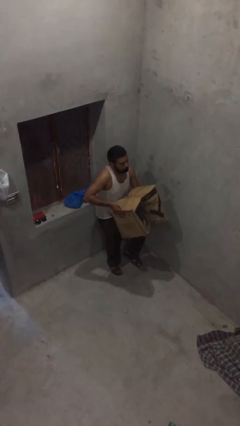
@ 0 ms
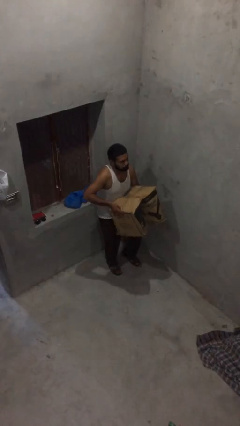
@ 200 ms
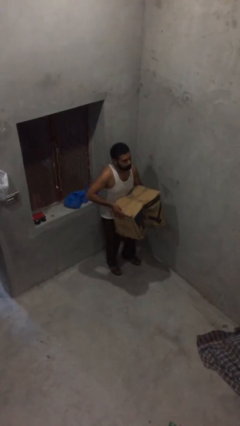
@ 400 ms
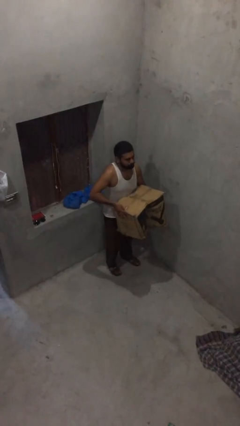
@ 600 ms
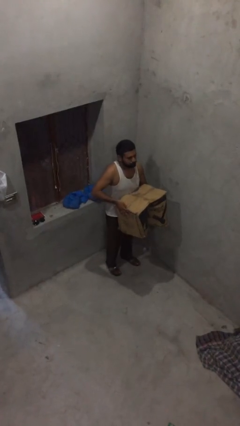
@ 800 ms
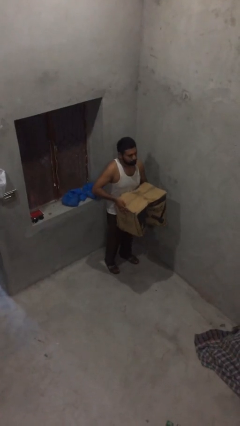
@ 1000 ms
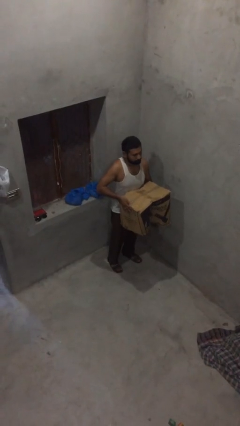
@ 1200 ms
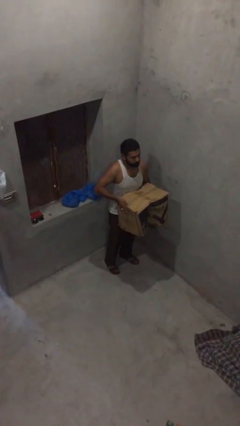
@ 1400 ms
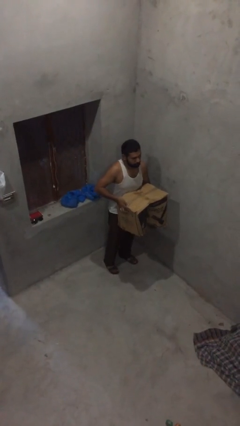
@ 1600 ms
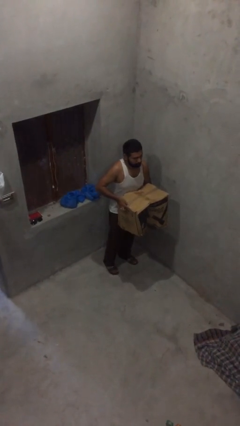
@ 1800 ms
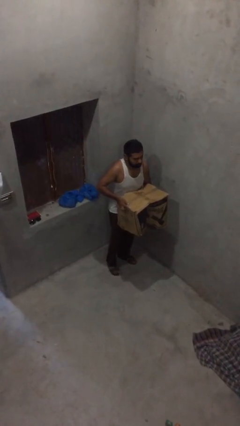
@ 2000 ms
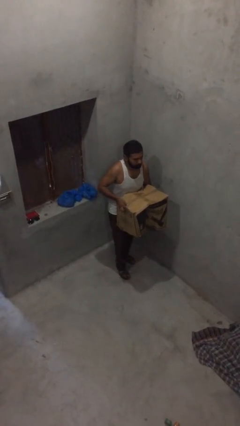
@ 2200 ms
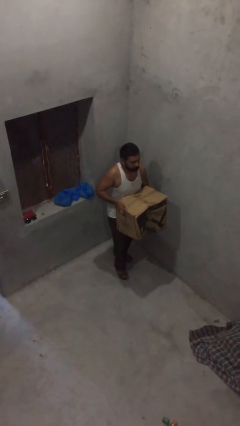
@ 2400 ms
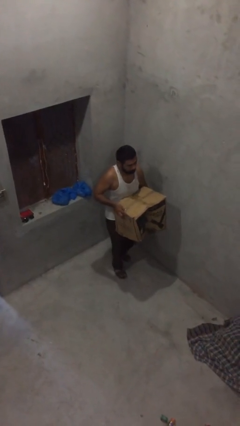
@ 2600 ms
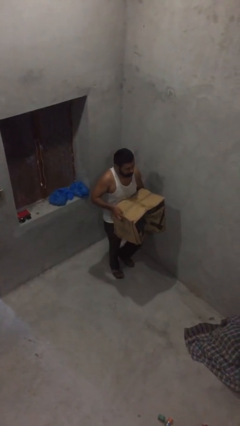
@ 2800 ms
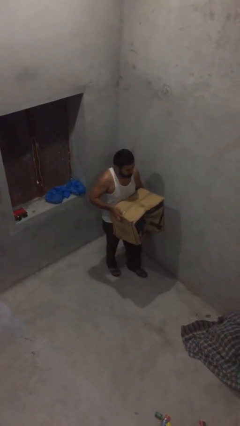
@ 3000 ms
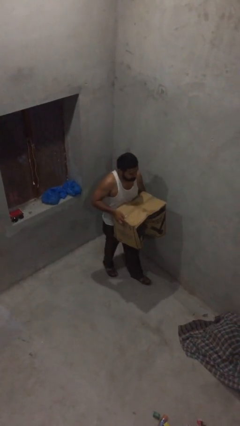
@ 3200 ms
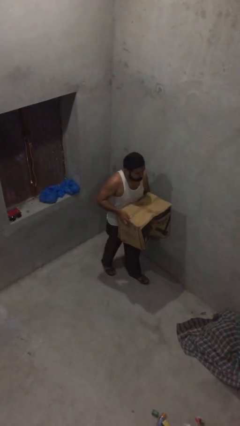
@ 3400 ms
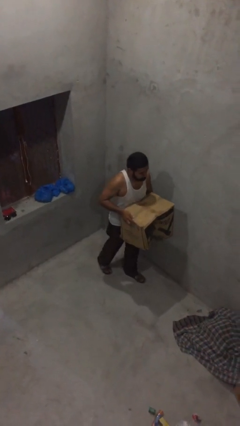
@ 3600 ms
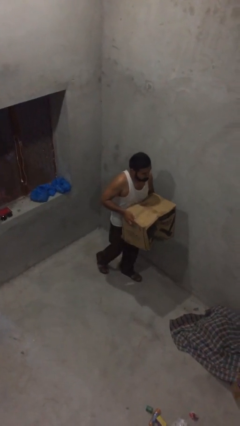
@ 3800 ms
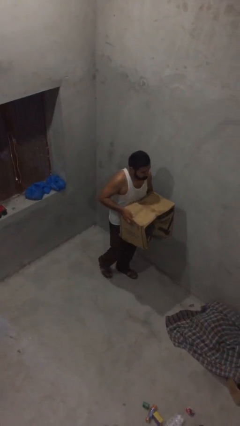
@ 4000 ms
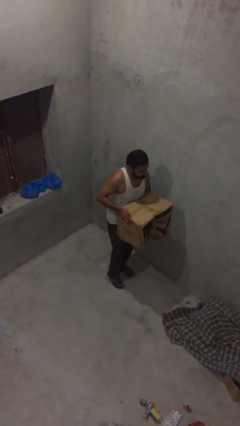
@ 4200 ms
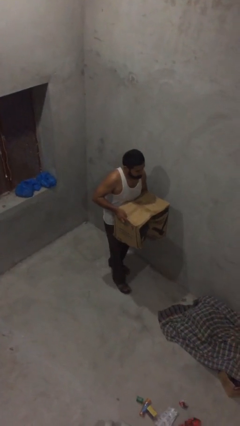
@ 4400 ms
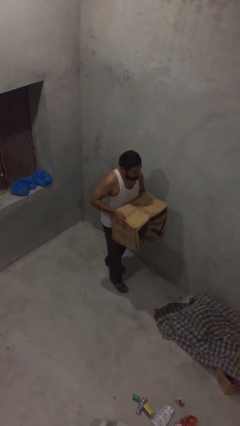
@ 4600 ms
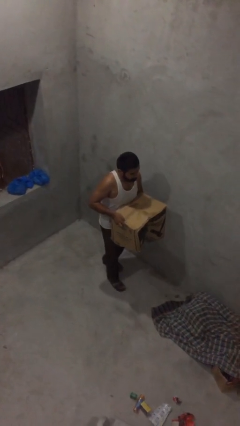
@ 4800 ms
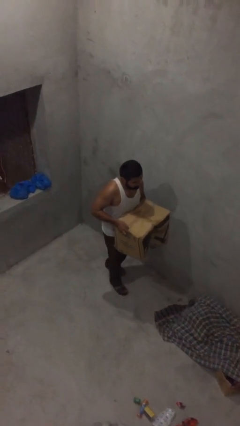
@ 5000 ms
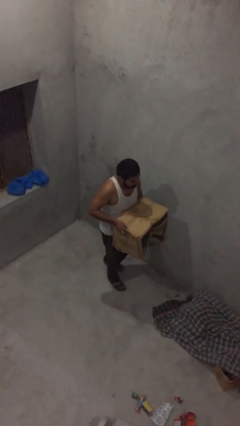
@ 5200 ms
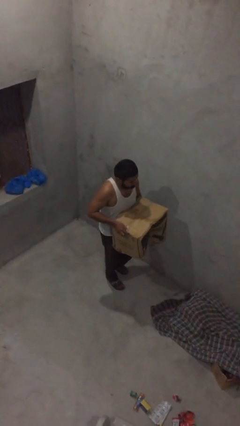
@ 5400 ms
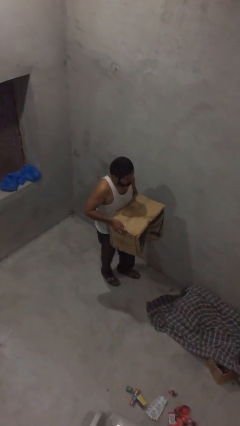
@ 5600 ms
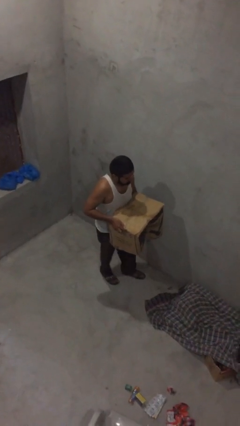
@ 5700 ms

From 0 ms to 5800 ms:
person carries heavy object

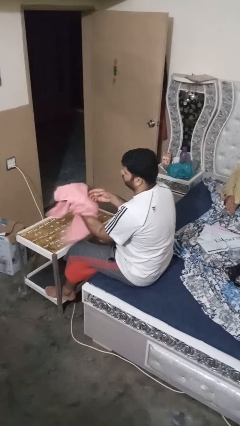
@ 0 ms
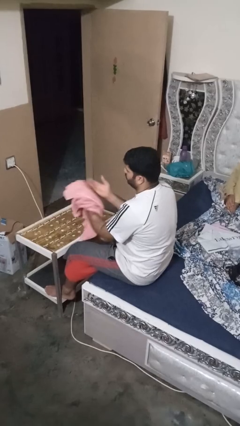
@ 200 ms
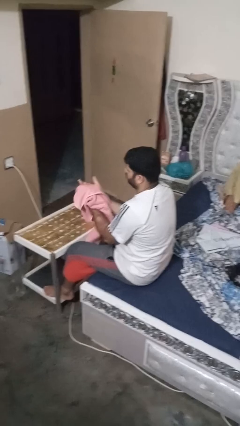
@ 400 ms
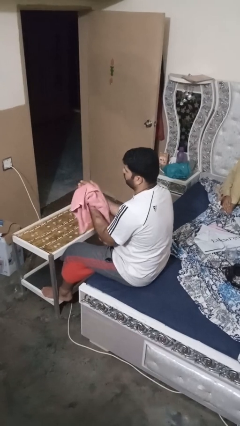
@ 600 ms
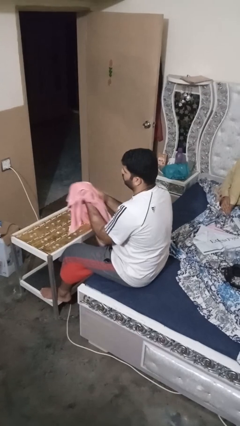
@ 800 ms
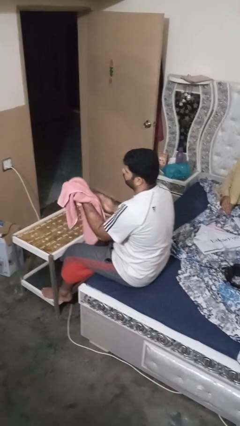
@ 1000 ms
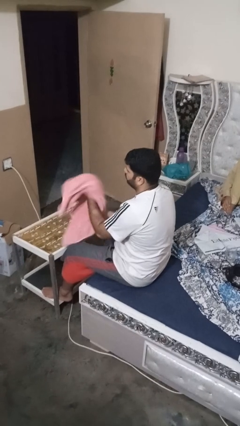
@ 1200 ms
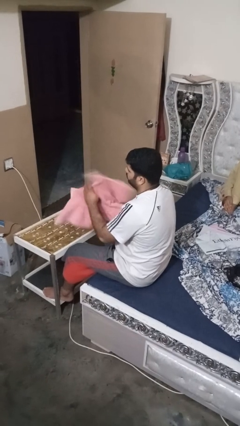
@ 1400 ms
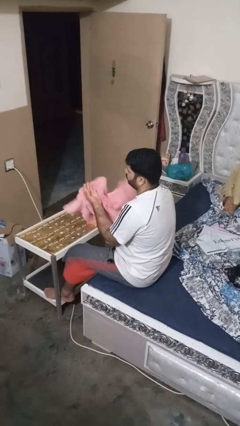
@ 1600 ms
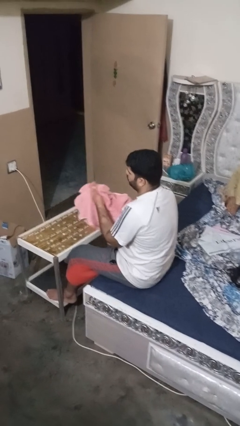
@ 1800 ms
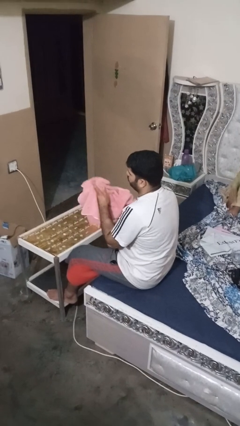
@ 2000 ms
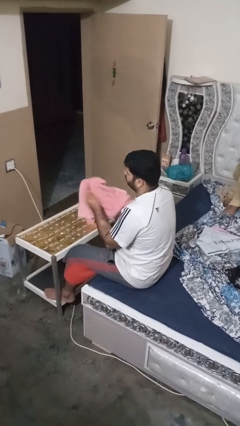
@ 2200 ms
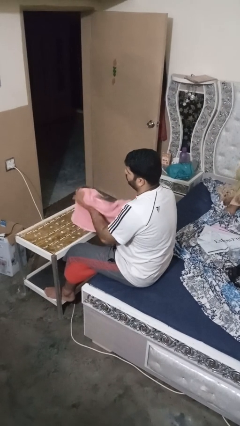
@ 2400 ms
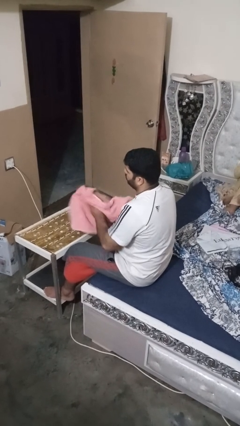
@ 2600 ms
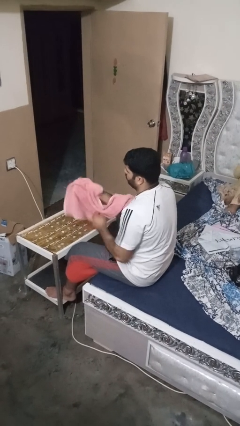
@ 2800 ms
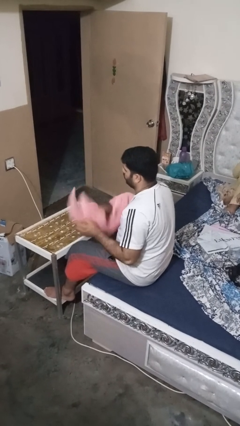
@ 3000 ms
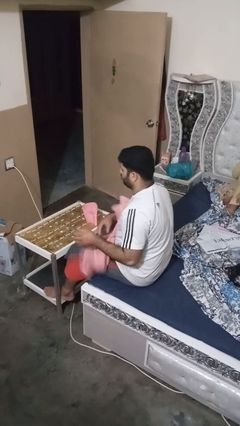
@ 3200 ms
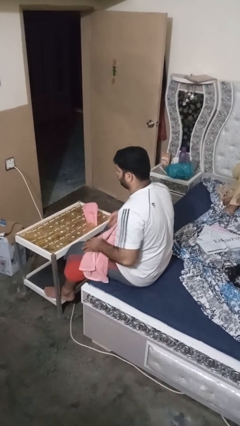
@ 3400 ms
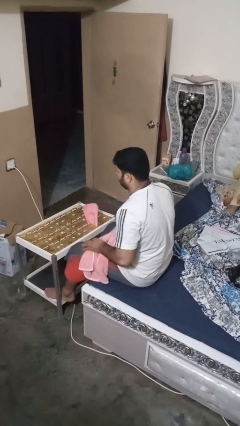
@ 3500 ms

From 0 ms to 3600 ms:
person dries hands with towel

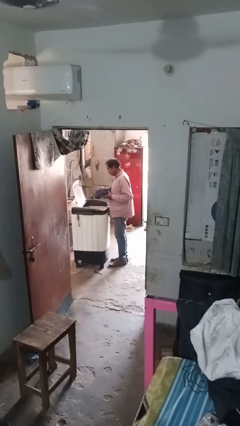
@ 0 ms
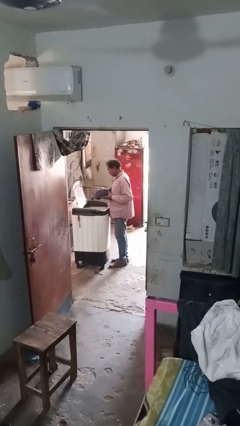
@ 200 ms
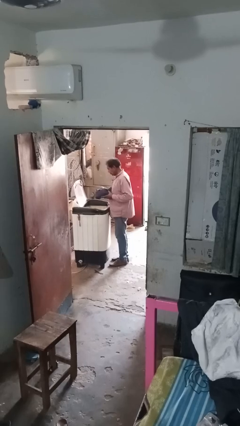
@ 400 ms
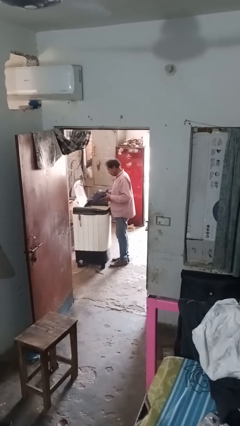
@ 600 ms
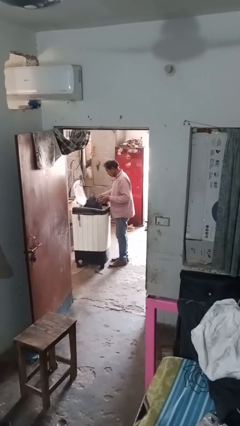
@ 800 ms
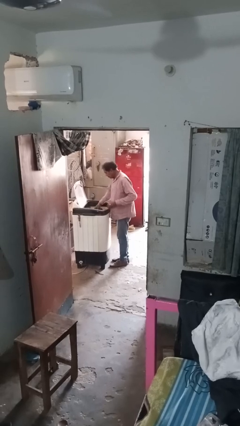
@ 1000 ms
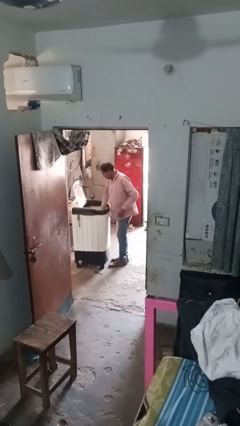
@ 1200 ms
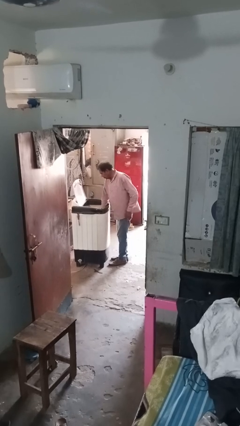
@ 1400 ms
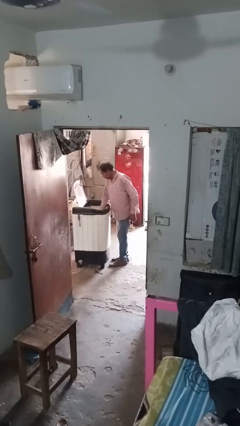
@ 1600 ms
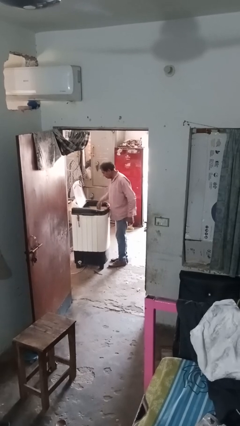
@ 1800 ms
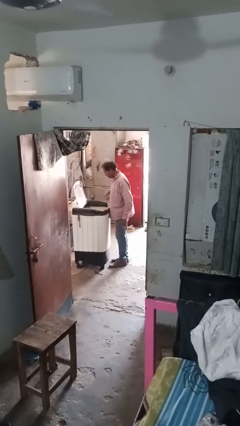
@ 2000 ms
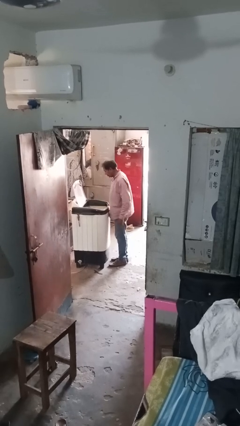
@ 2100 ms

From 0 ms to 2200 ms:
person loads clotheswasher

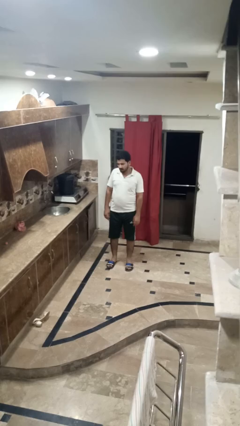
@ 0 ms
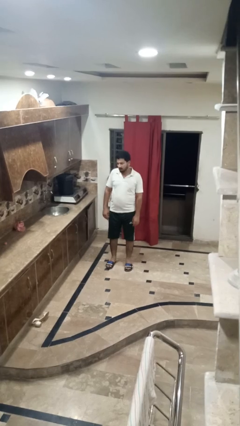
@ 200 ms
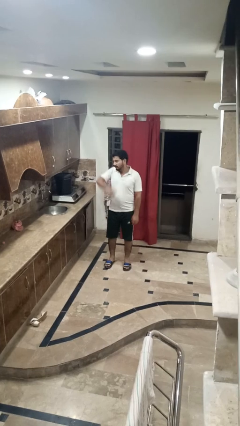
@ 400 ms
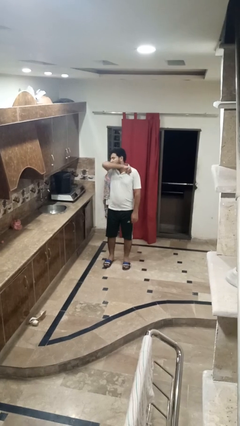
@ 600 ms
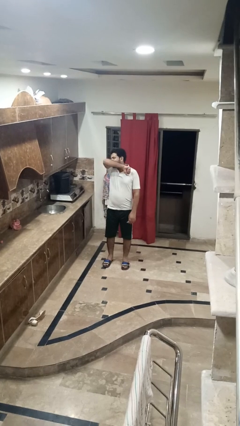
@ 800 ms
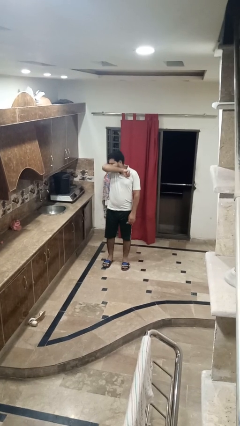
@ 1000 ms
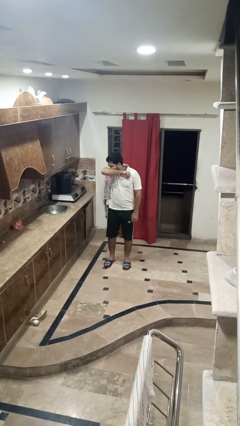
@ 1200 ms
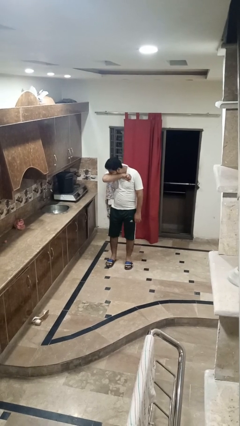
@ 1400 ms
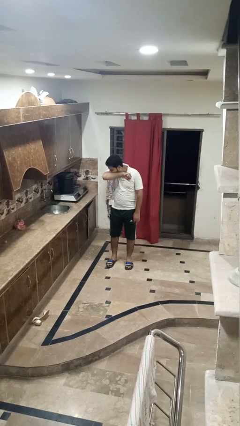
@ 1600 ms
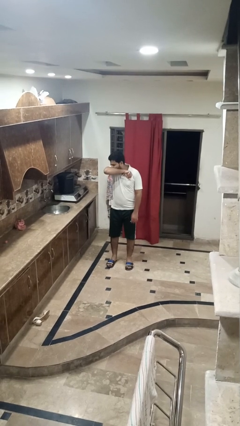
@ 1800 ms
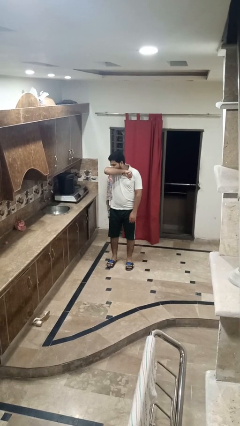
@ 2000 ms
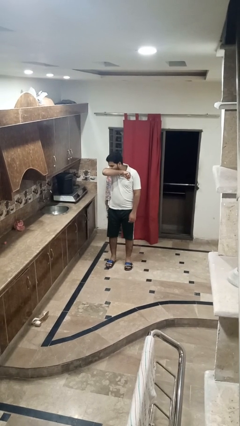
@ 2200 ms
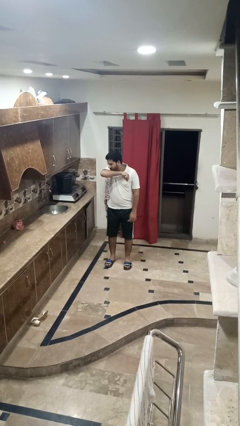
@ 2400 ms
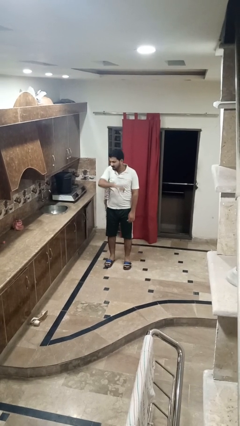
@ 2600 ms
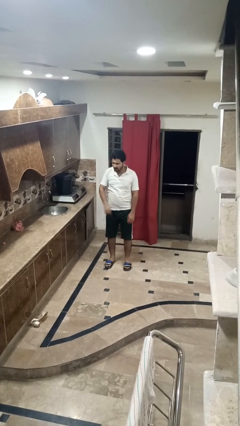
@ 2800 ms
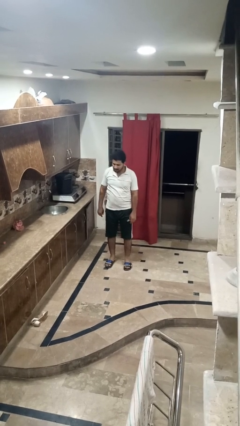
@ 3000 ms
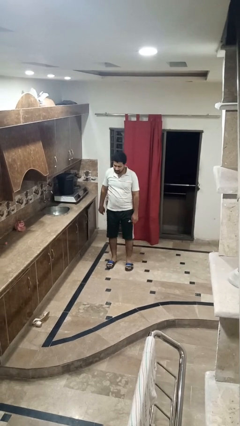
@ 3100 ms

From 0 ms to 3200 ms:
person sneezes into arm

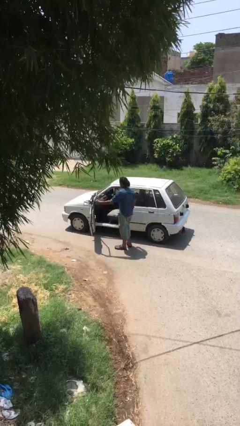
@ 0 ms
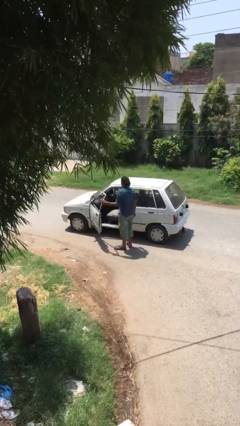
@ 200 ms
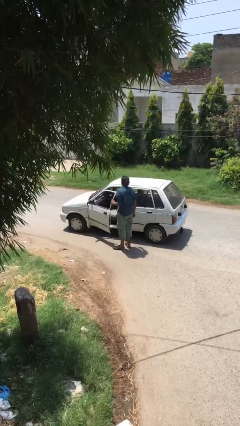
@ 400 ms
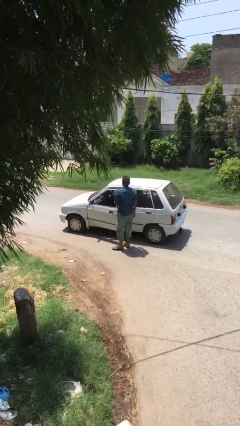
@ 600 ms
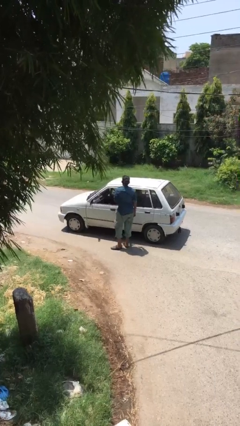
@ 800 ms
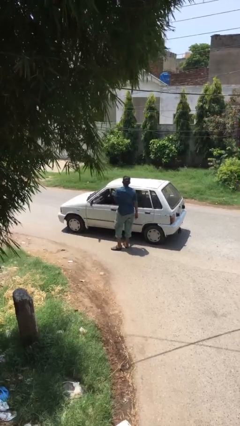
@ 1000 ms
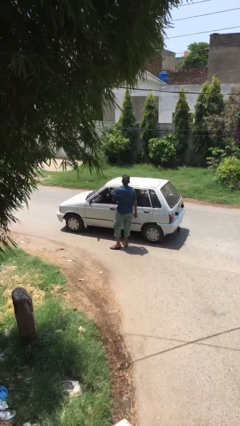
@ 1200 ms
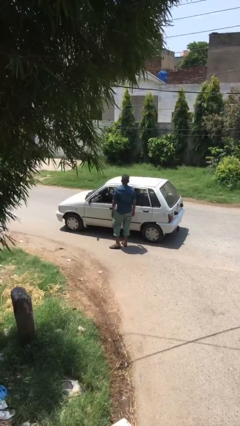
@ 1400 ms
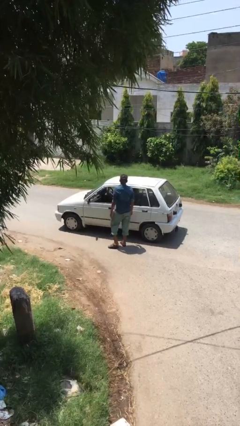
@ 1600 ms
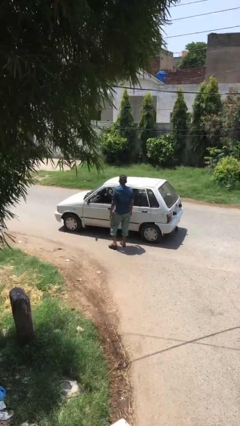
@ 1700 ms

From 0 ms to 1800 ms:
person closes car door

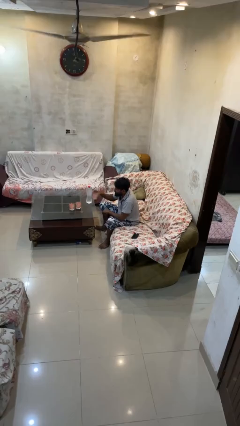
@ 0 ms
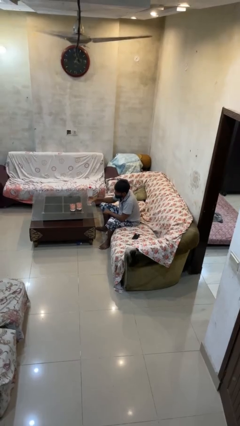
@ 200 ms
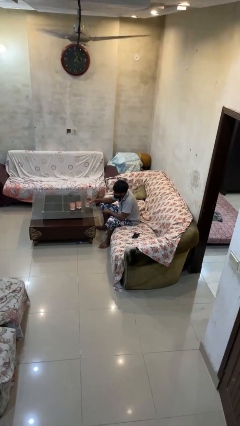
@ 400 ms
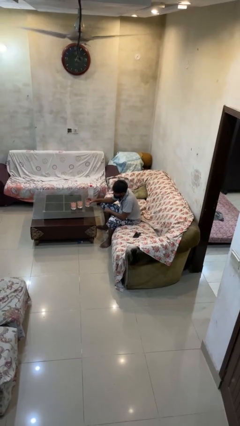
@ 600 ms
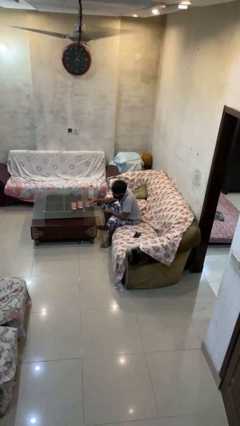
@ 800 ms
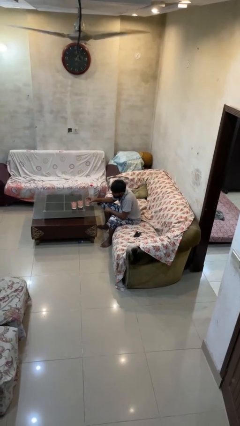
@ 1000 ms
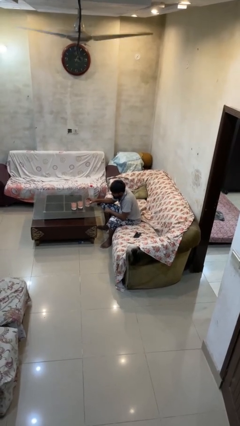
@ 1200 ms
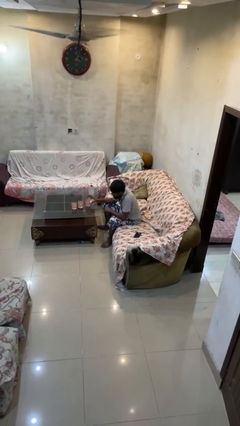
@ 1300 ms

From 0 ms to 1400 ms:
person puts down object on table
